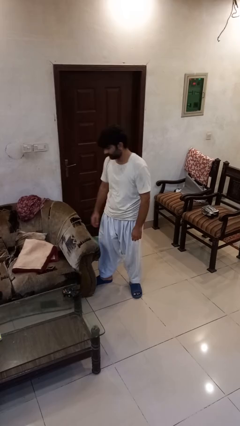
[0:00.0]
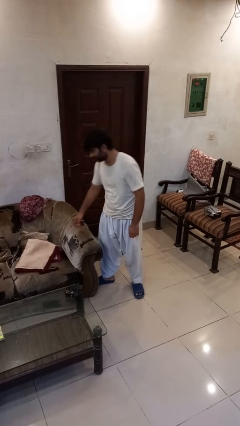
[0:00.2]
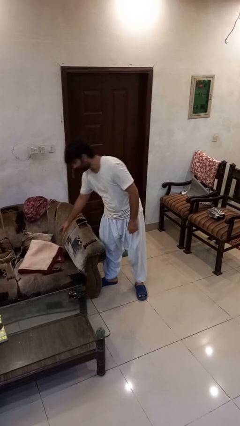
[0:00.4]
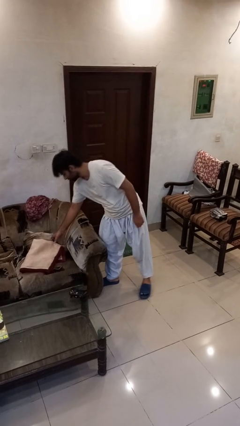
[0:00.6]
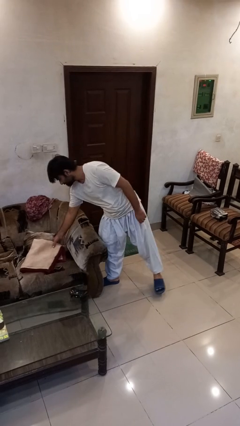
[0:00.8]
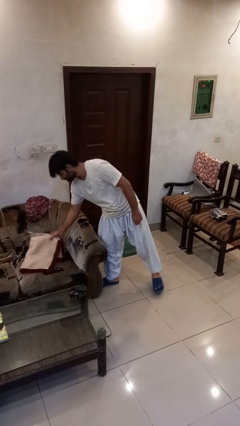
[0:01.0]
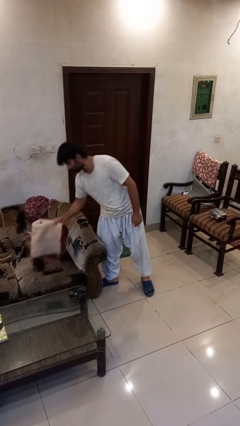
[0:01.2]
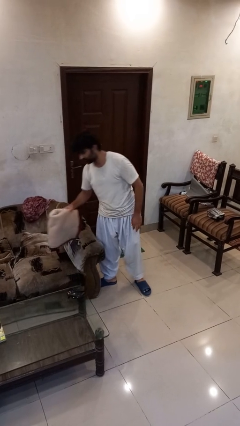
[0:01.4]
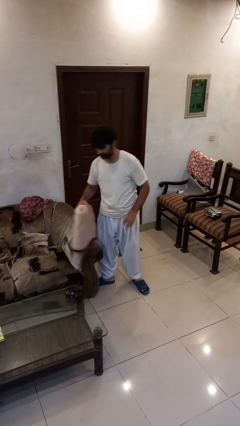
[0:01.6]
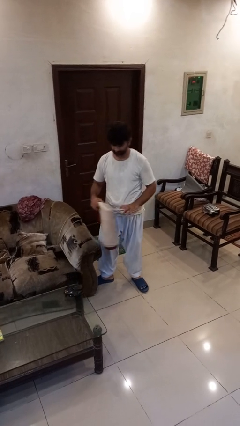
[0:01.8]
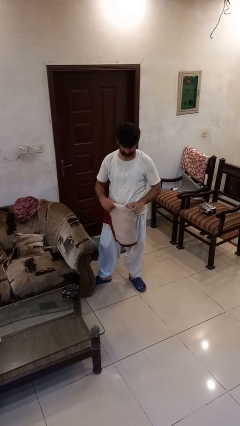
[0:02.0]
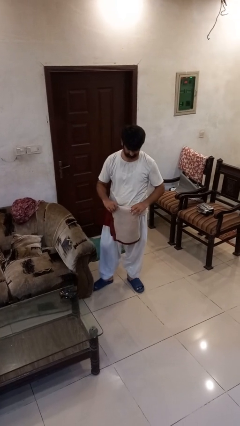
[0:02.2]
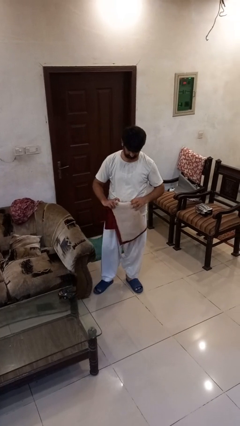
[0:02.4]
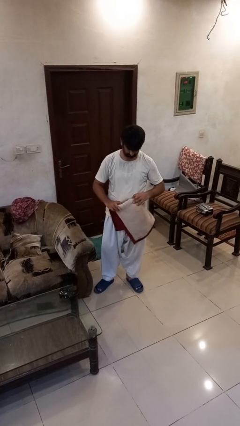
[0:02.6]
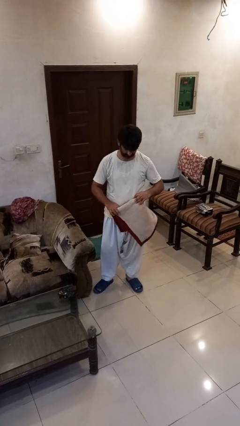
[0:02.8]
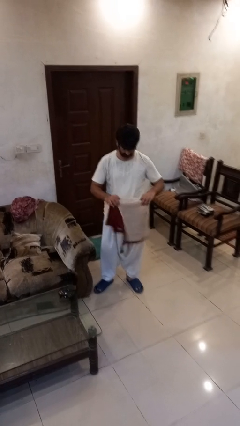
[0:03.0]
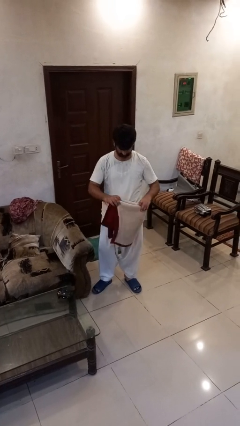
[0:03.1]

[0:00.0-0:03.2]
person picks up object from couch

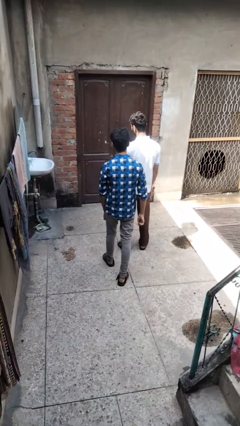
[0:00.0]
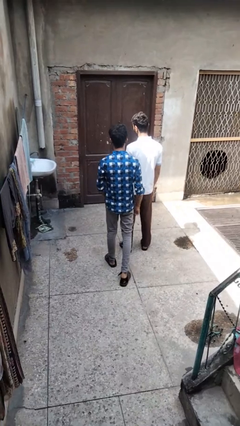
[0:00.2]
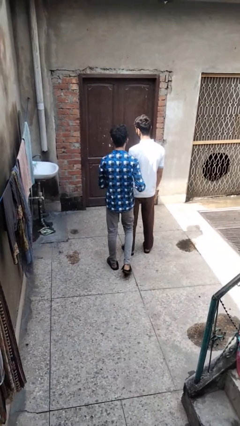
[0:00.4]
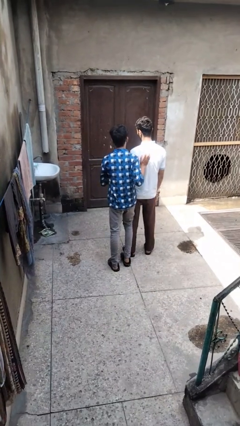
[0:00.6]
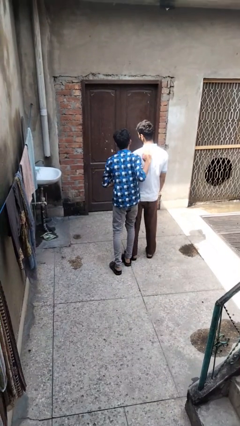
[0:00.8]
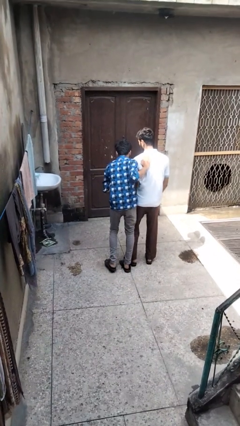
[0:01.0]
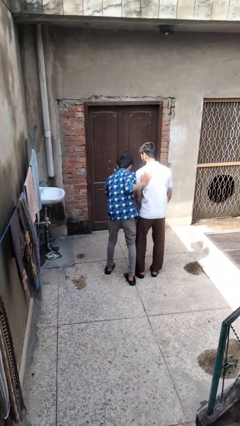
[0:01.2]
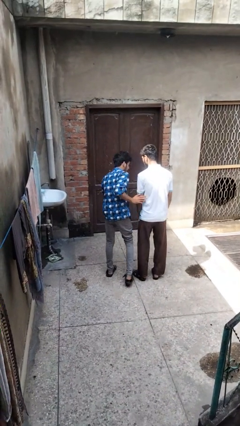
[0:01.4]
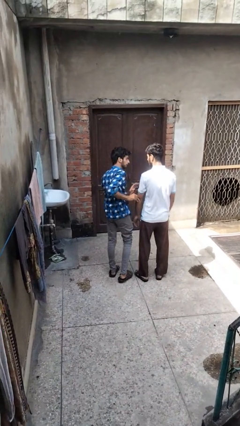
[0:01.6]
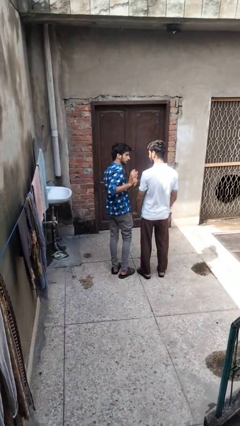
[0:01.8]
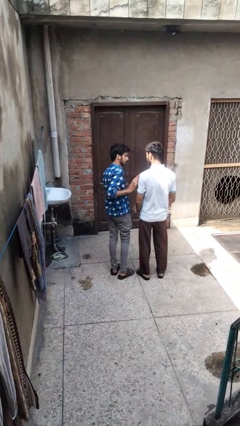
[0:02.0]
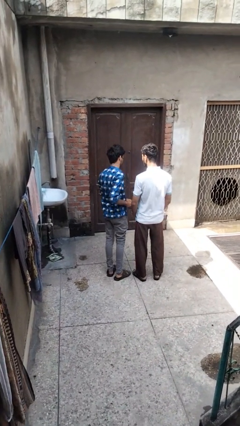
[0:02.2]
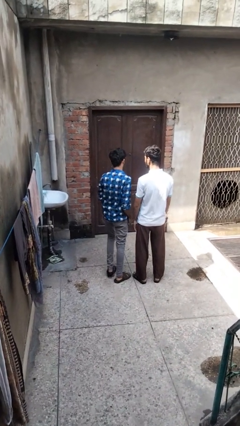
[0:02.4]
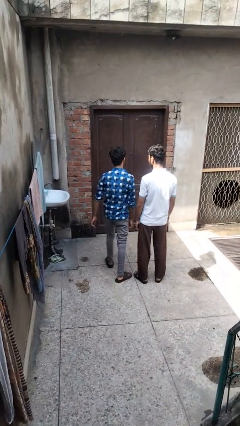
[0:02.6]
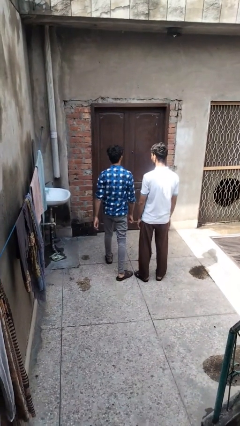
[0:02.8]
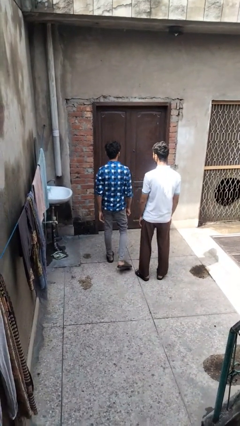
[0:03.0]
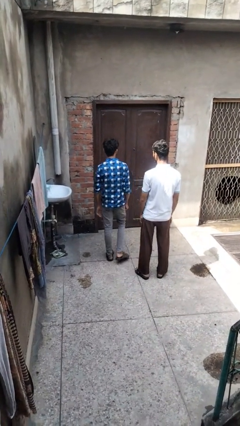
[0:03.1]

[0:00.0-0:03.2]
person bumps into person

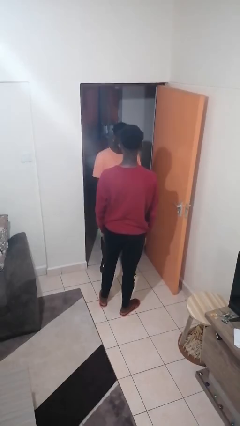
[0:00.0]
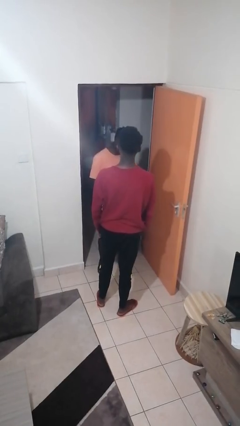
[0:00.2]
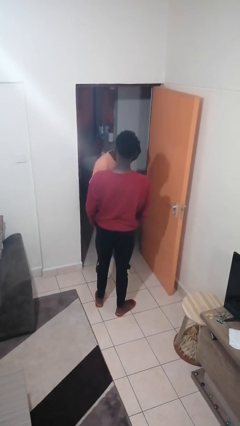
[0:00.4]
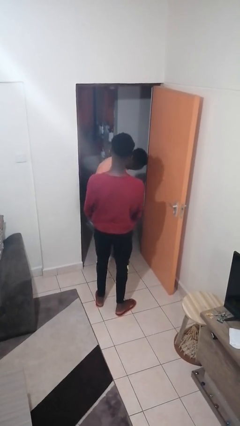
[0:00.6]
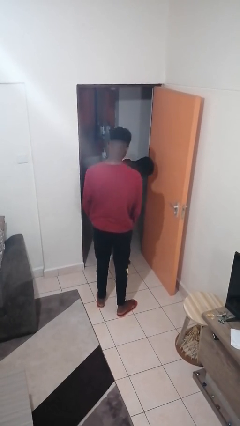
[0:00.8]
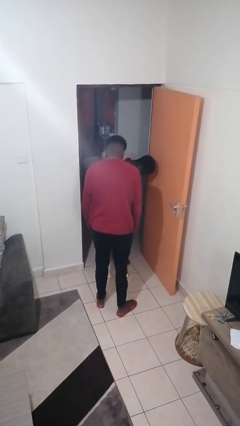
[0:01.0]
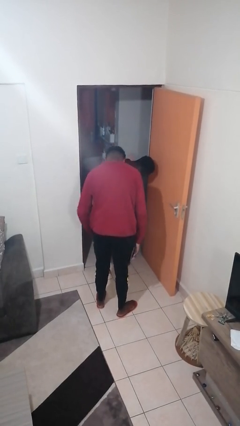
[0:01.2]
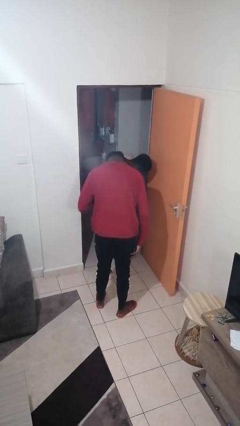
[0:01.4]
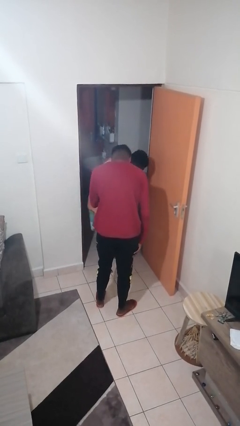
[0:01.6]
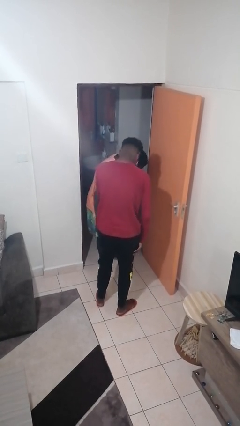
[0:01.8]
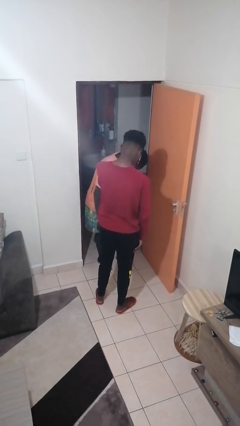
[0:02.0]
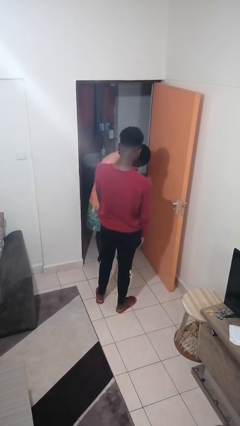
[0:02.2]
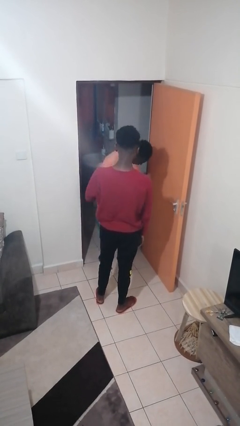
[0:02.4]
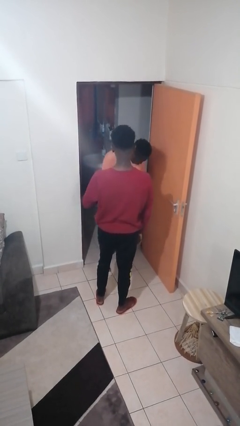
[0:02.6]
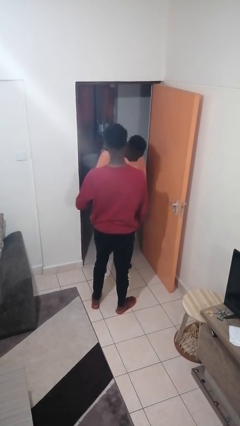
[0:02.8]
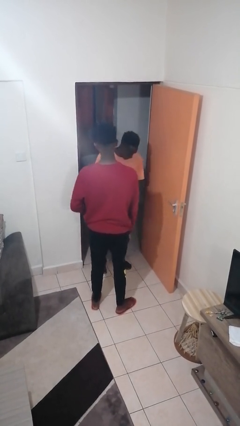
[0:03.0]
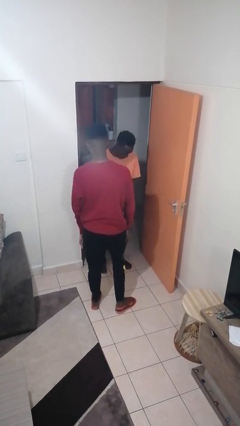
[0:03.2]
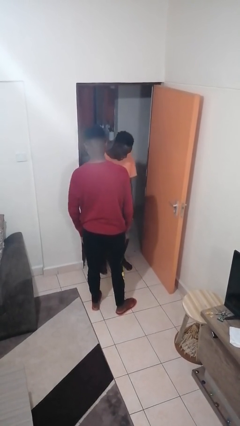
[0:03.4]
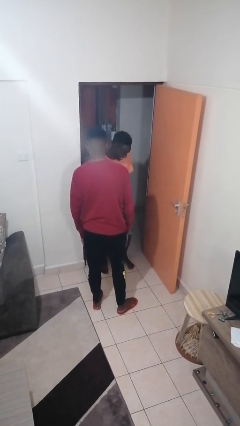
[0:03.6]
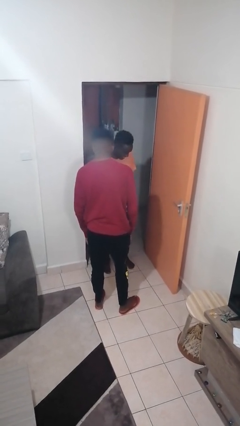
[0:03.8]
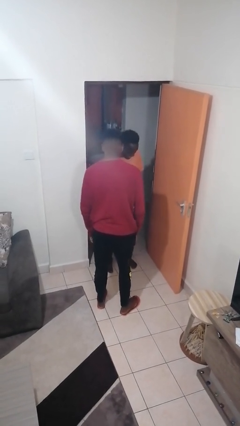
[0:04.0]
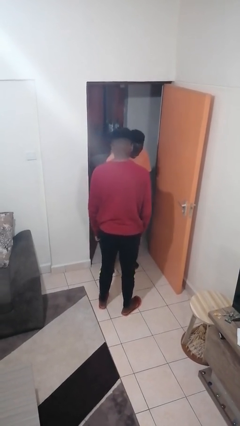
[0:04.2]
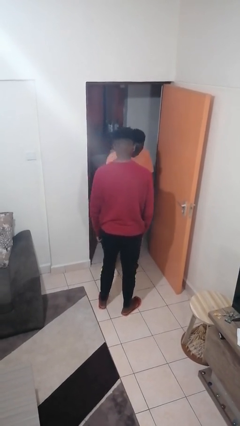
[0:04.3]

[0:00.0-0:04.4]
person laughs with person

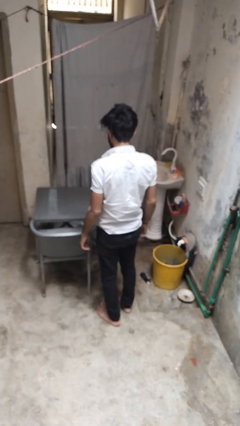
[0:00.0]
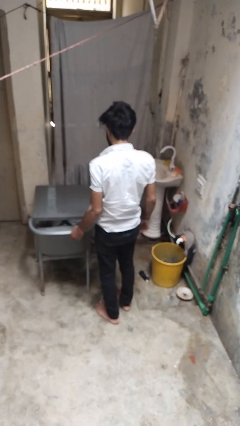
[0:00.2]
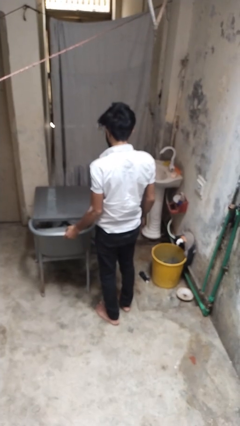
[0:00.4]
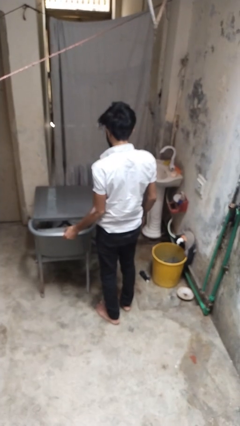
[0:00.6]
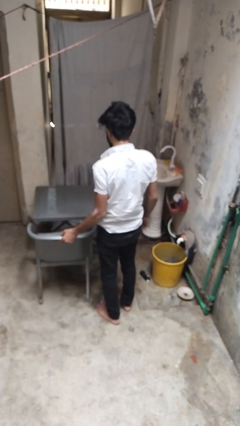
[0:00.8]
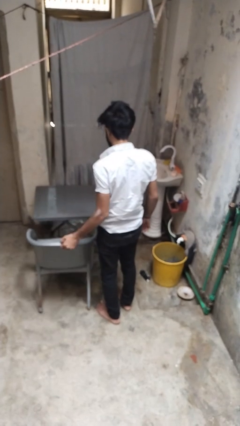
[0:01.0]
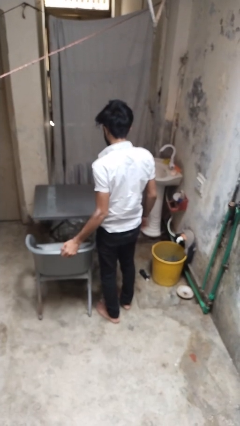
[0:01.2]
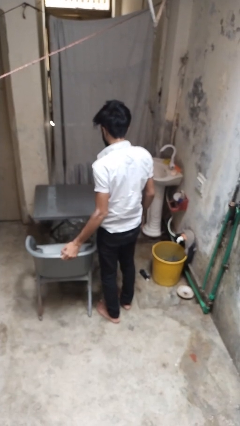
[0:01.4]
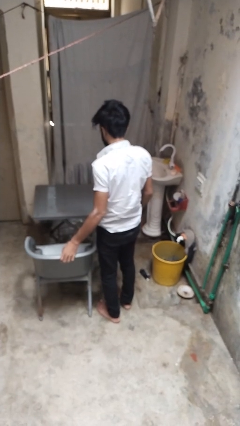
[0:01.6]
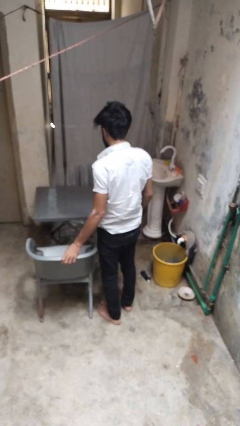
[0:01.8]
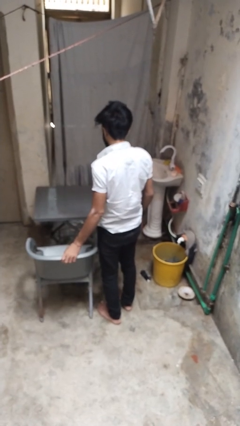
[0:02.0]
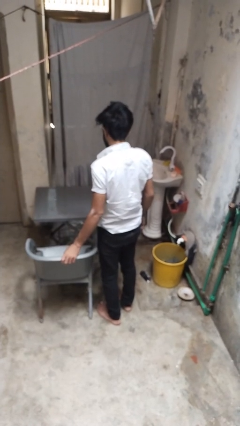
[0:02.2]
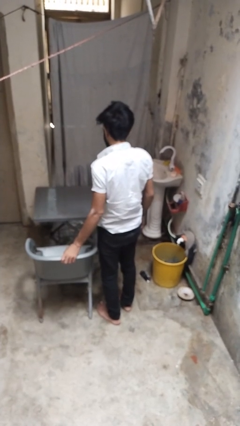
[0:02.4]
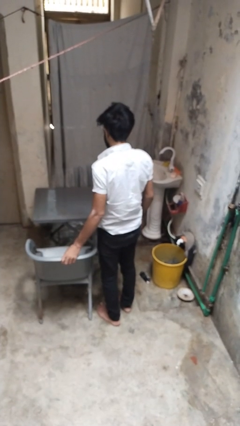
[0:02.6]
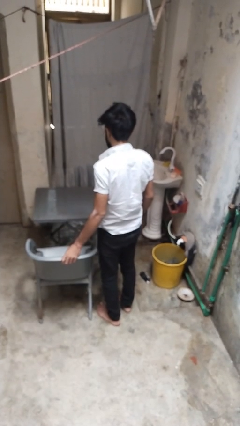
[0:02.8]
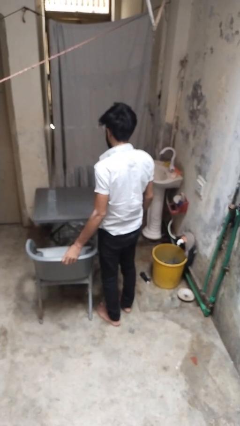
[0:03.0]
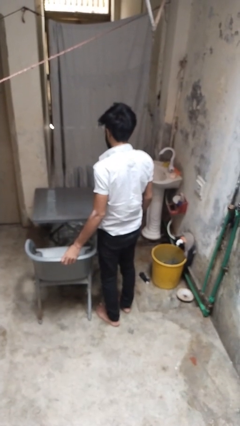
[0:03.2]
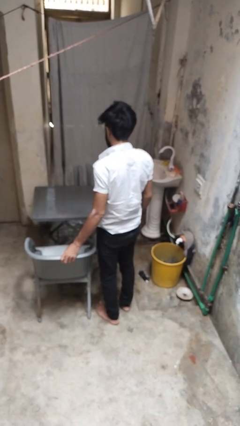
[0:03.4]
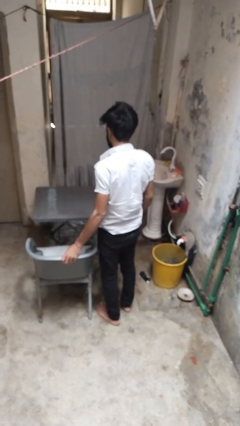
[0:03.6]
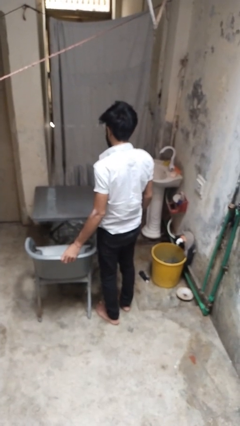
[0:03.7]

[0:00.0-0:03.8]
person pulls out chair

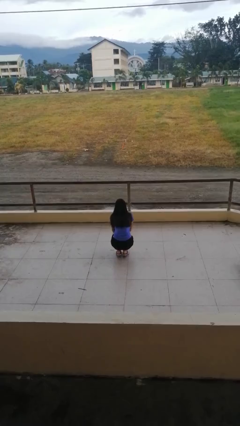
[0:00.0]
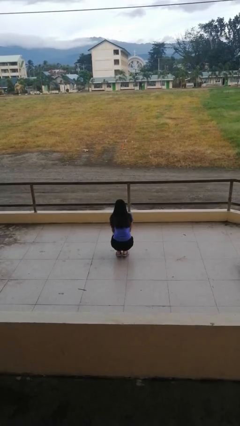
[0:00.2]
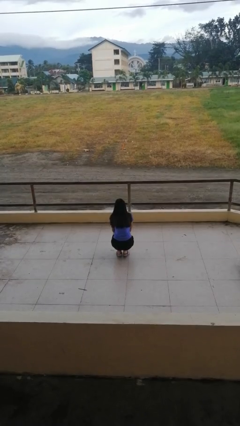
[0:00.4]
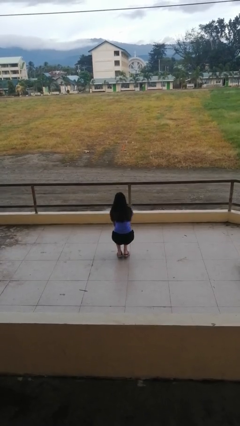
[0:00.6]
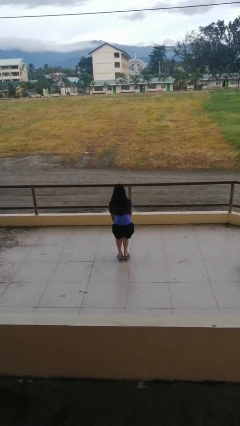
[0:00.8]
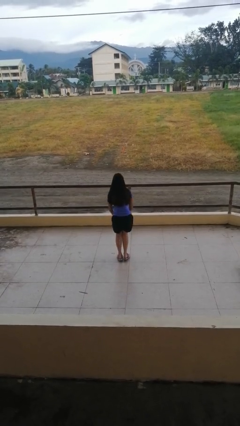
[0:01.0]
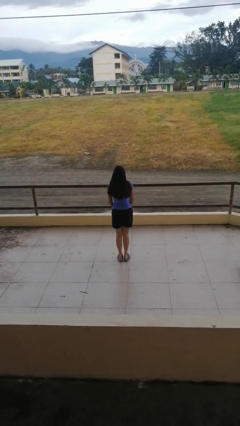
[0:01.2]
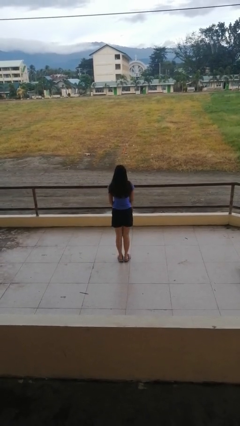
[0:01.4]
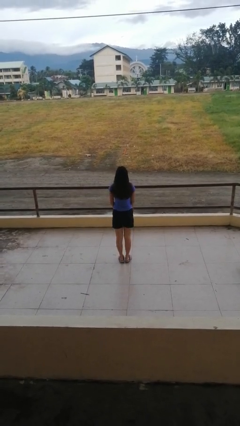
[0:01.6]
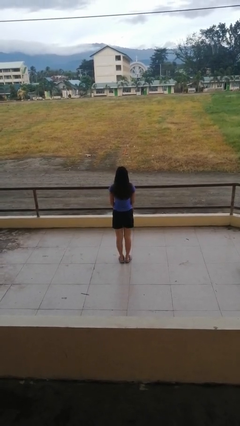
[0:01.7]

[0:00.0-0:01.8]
person stands up

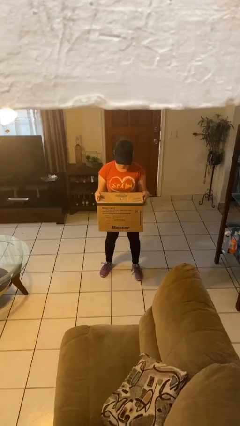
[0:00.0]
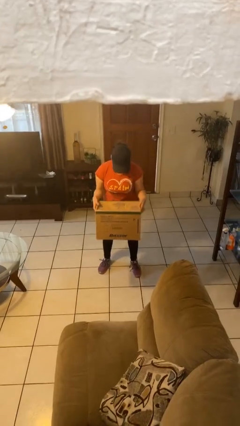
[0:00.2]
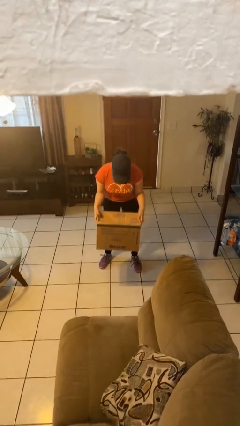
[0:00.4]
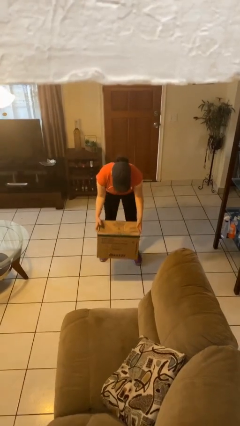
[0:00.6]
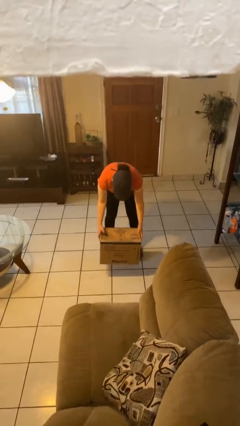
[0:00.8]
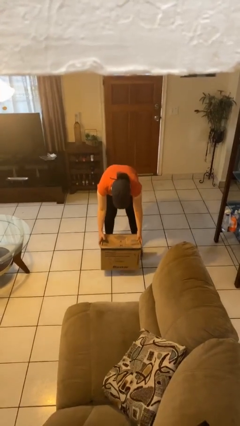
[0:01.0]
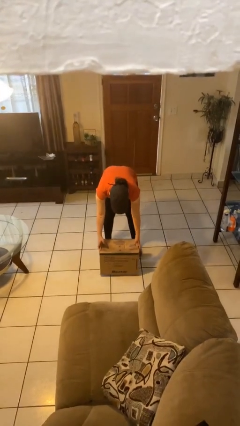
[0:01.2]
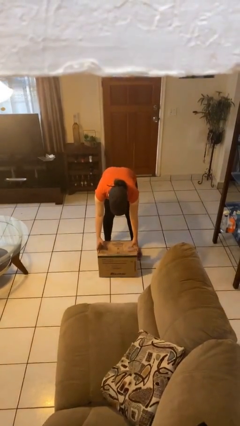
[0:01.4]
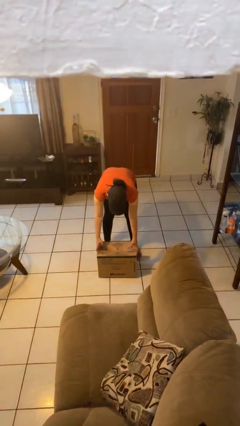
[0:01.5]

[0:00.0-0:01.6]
person puts down object on floor
